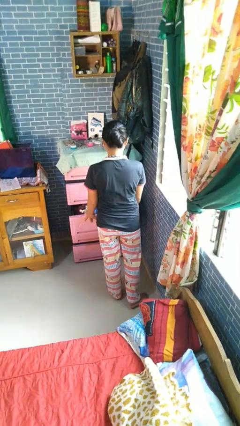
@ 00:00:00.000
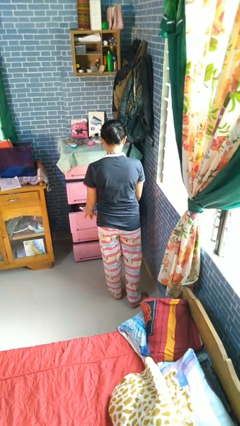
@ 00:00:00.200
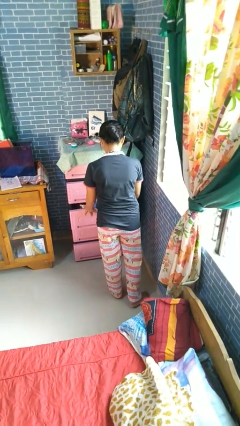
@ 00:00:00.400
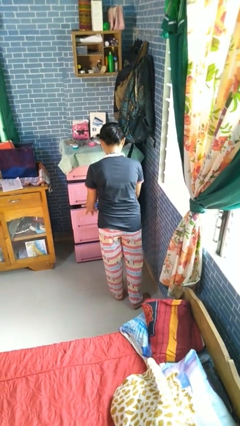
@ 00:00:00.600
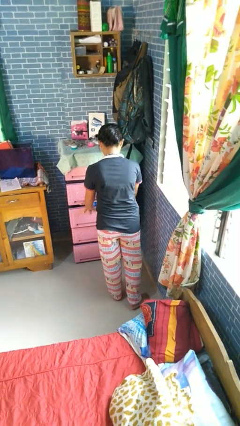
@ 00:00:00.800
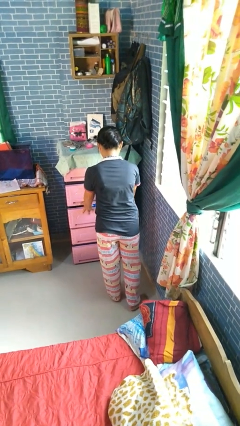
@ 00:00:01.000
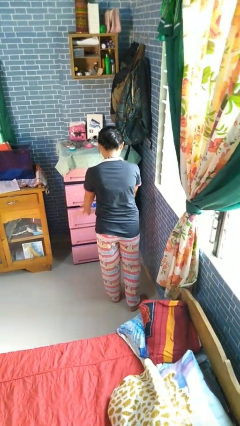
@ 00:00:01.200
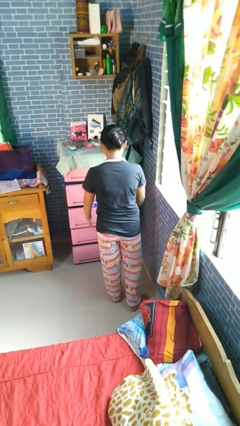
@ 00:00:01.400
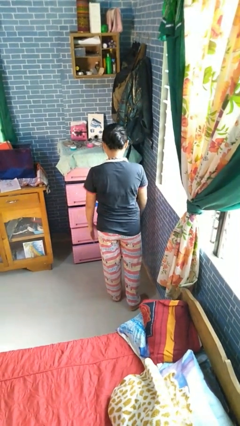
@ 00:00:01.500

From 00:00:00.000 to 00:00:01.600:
person closes dresser drawer

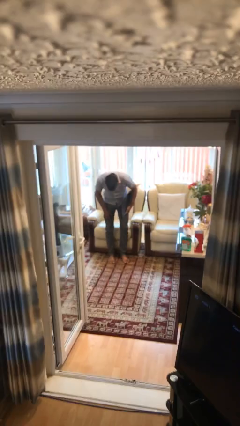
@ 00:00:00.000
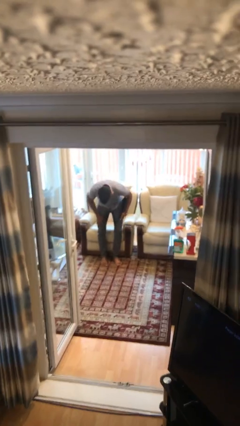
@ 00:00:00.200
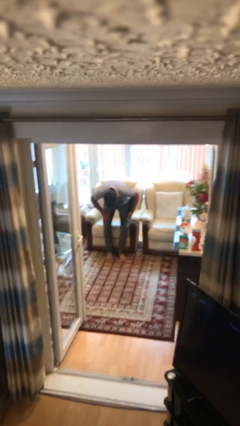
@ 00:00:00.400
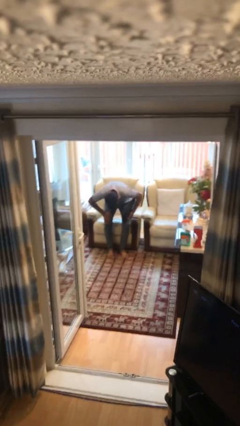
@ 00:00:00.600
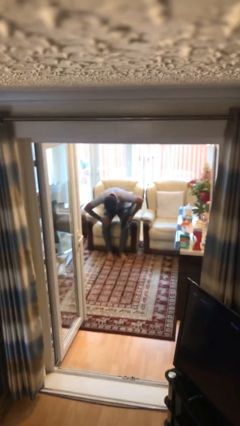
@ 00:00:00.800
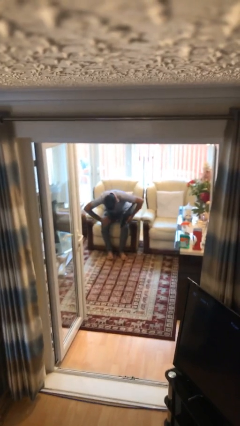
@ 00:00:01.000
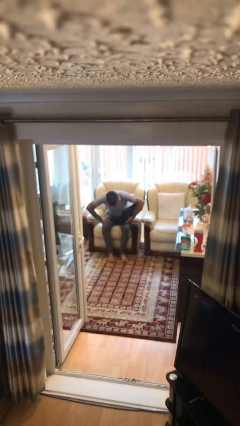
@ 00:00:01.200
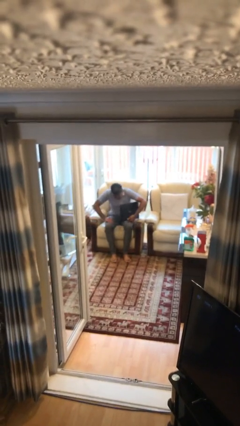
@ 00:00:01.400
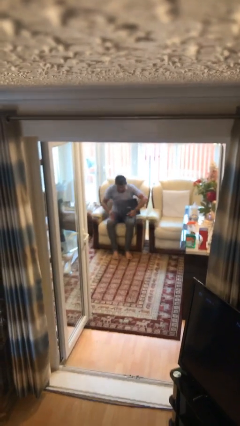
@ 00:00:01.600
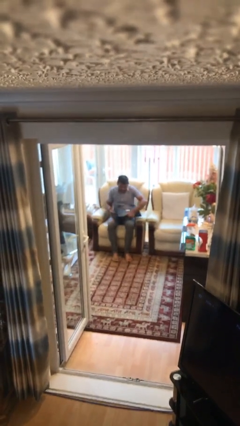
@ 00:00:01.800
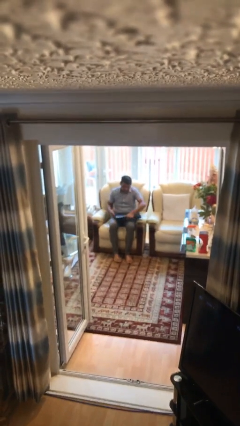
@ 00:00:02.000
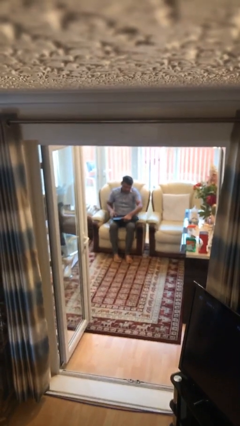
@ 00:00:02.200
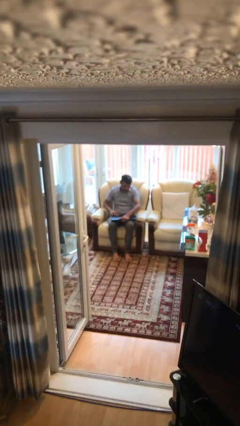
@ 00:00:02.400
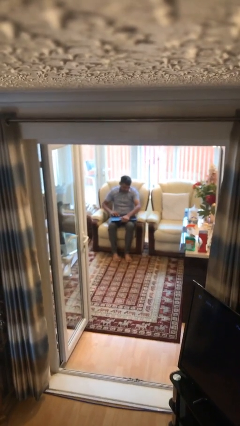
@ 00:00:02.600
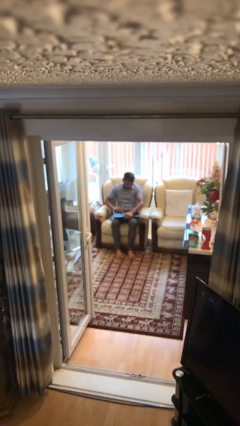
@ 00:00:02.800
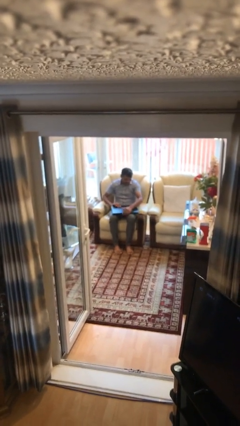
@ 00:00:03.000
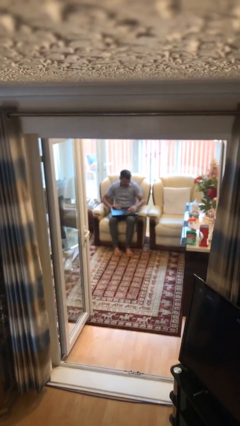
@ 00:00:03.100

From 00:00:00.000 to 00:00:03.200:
person sits down

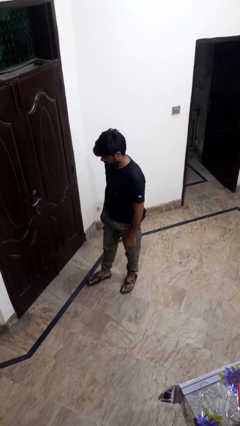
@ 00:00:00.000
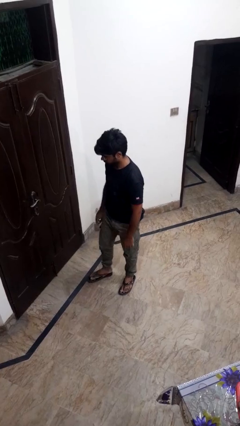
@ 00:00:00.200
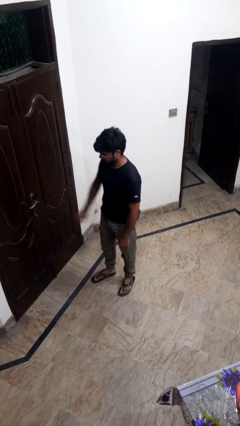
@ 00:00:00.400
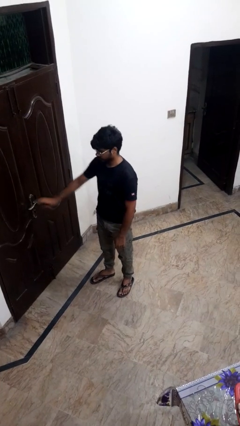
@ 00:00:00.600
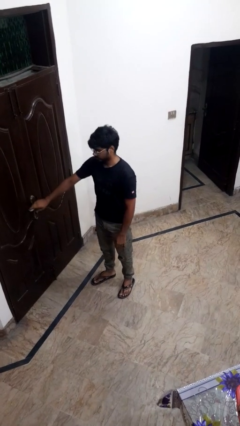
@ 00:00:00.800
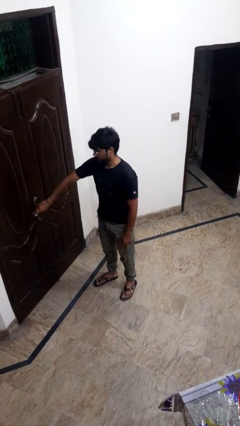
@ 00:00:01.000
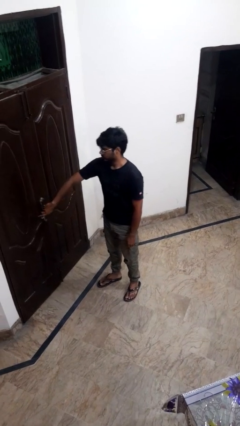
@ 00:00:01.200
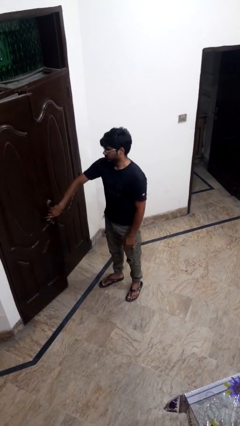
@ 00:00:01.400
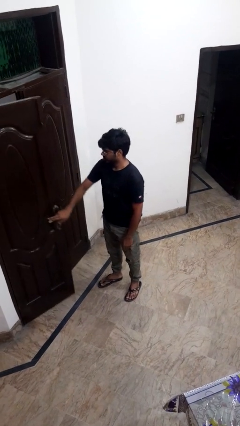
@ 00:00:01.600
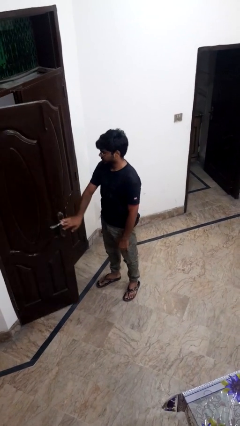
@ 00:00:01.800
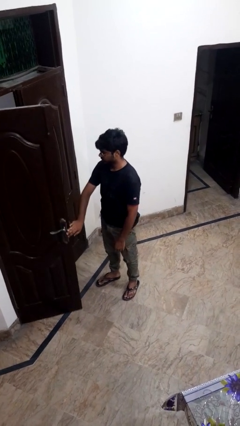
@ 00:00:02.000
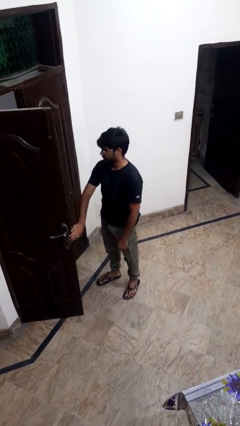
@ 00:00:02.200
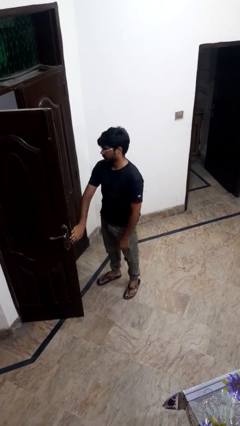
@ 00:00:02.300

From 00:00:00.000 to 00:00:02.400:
person opens facility door

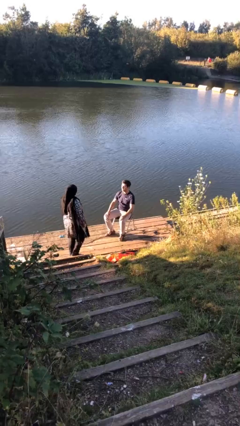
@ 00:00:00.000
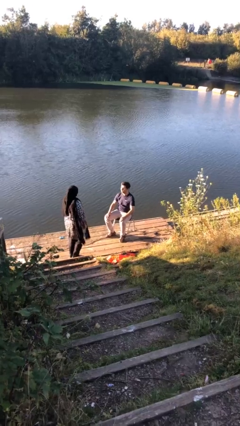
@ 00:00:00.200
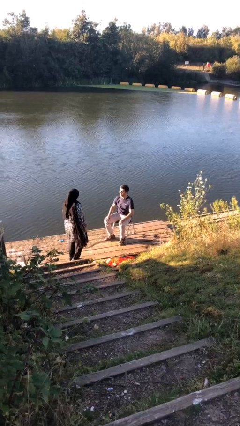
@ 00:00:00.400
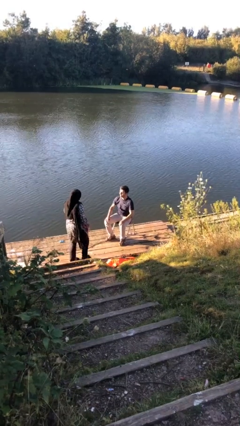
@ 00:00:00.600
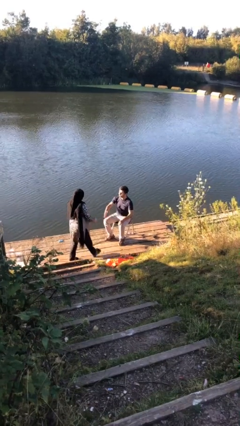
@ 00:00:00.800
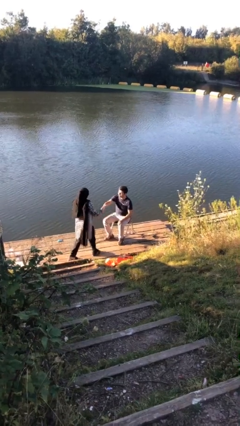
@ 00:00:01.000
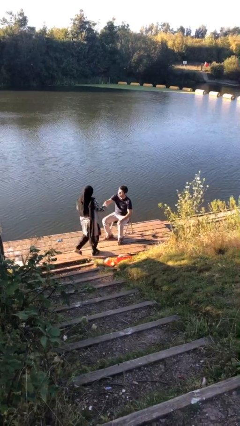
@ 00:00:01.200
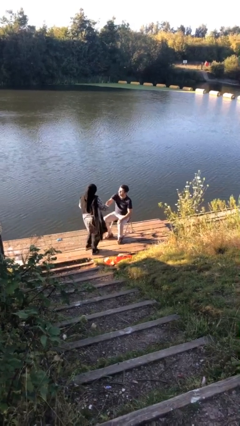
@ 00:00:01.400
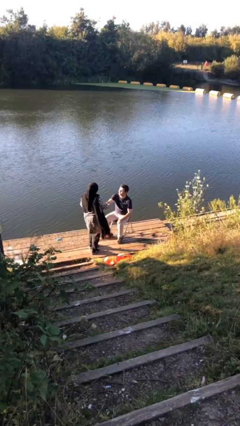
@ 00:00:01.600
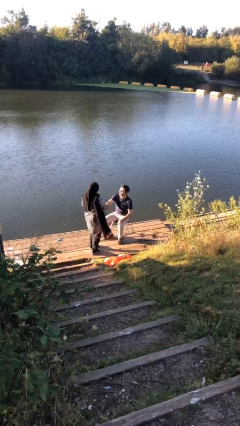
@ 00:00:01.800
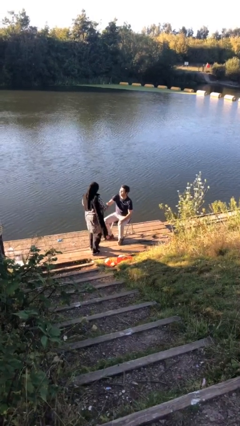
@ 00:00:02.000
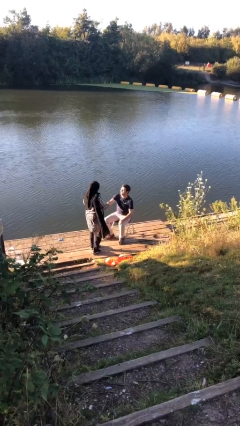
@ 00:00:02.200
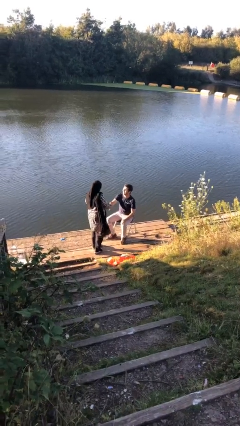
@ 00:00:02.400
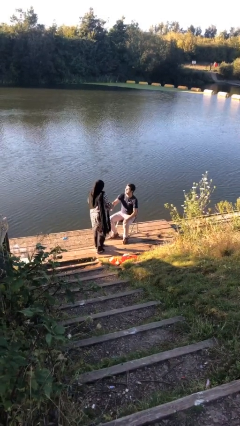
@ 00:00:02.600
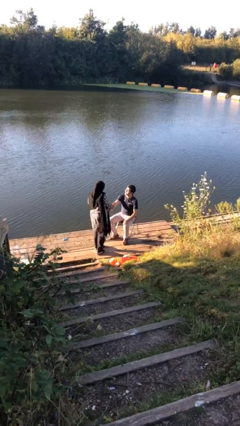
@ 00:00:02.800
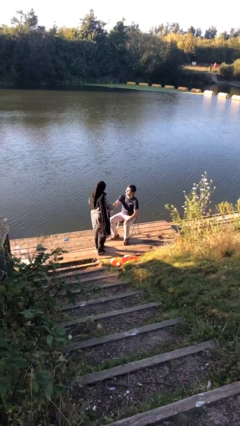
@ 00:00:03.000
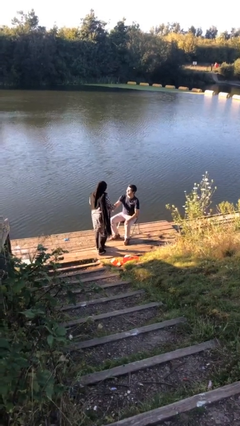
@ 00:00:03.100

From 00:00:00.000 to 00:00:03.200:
person shakes hand

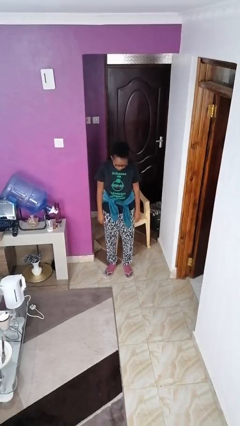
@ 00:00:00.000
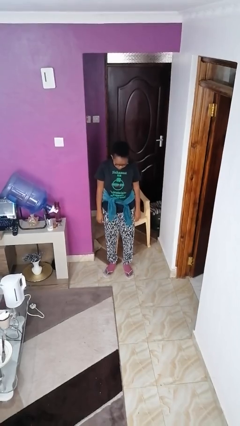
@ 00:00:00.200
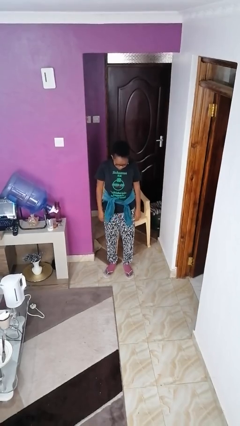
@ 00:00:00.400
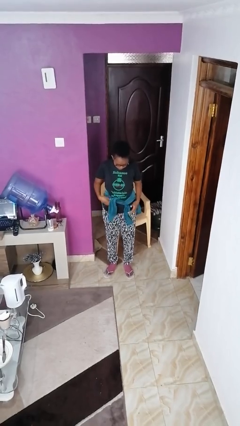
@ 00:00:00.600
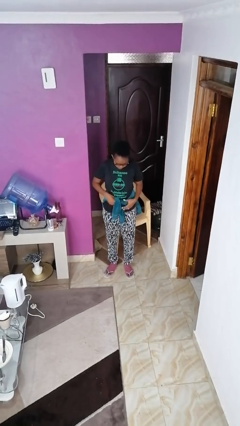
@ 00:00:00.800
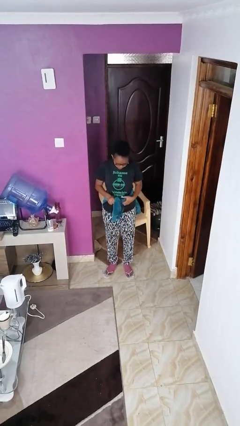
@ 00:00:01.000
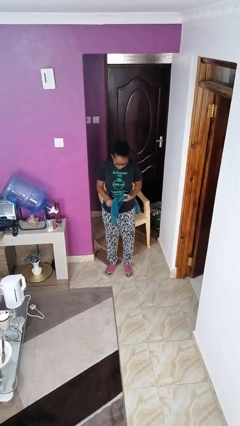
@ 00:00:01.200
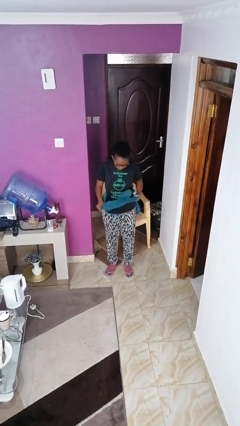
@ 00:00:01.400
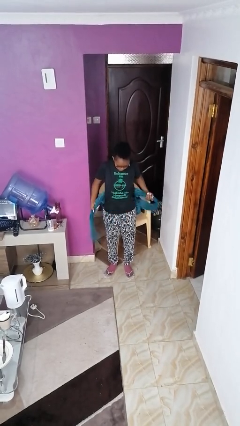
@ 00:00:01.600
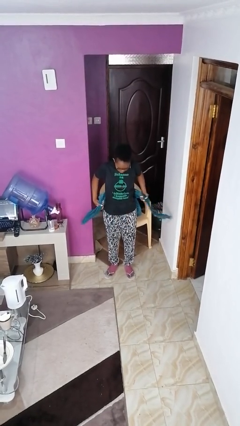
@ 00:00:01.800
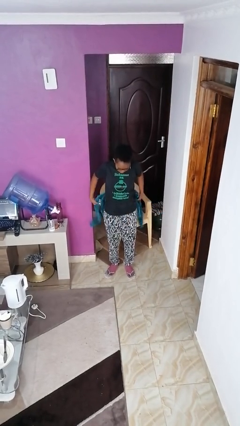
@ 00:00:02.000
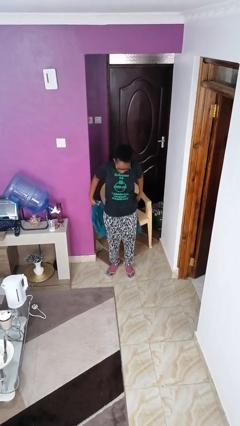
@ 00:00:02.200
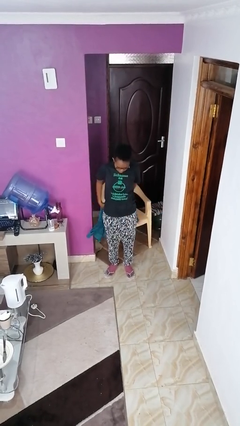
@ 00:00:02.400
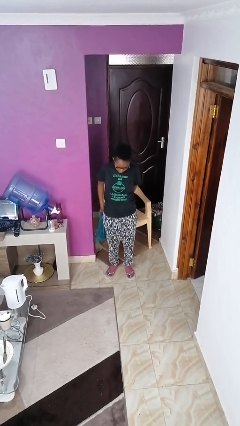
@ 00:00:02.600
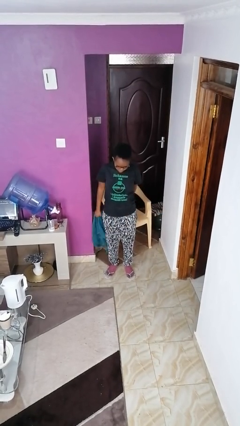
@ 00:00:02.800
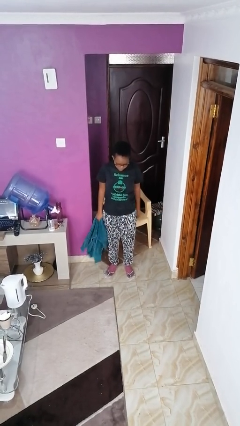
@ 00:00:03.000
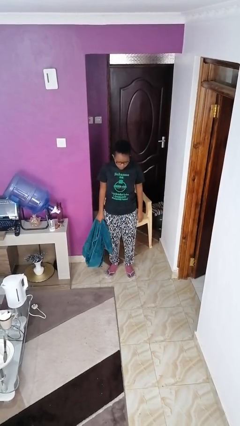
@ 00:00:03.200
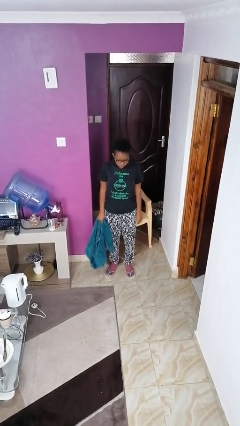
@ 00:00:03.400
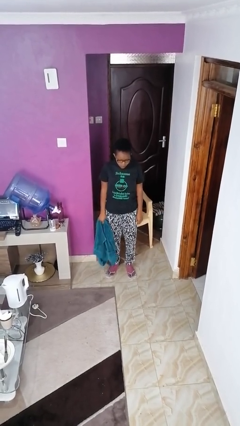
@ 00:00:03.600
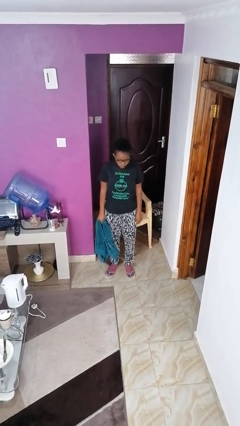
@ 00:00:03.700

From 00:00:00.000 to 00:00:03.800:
person unties jacket around waist

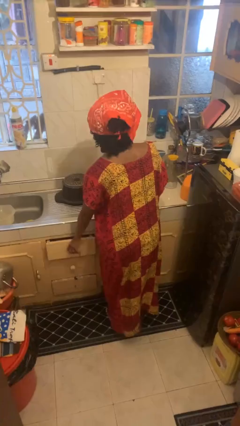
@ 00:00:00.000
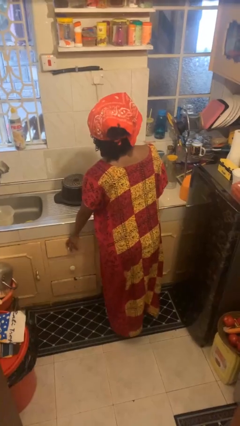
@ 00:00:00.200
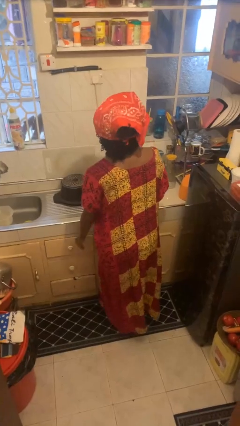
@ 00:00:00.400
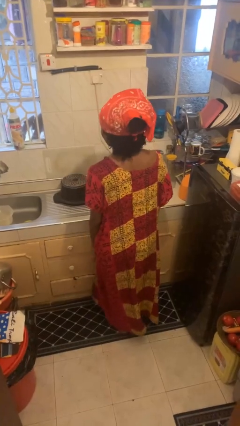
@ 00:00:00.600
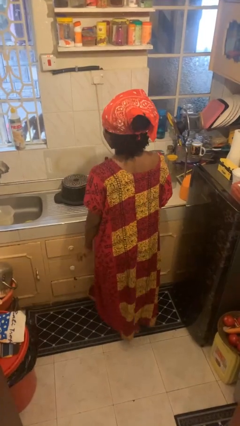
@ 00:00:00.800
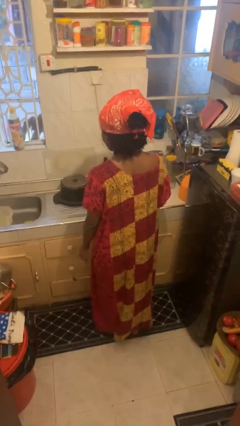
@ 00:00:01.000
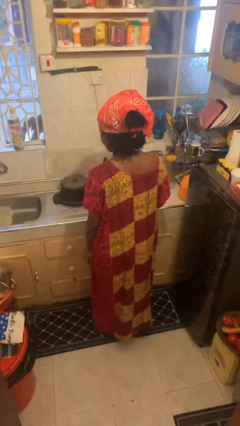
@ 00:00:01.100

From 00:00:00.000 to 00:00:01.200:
person closes kitchen drawer

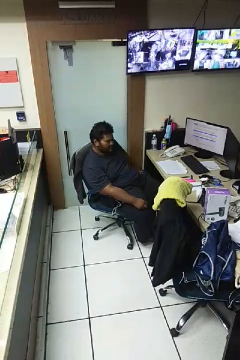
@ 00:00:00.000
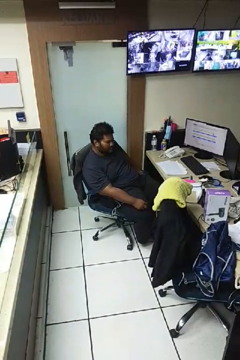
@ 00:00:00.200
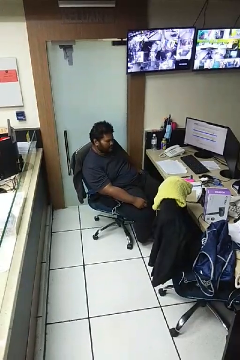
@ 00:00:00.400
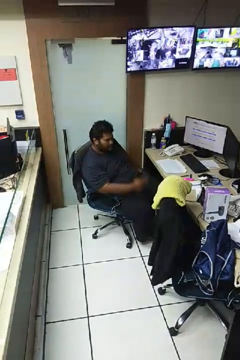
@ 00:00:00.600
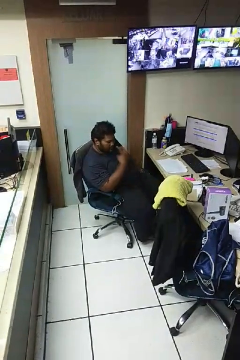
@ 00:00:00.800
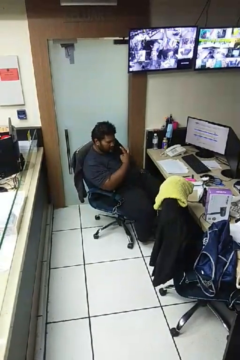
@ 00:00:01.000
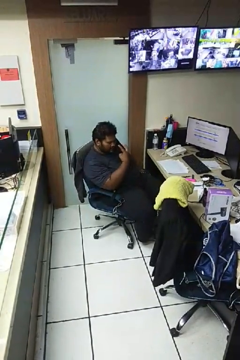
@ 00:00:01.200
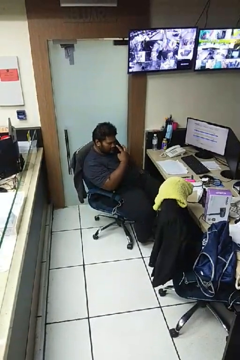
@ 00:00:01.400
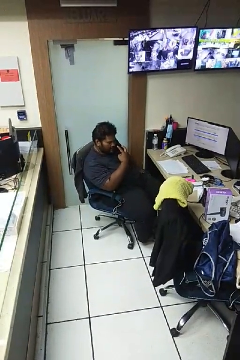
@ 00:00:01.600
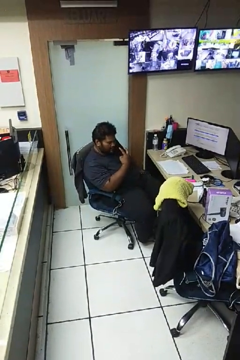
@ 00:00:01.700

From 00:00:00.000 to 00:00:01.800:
person gestures watch closely
